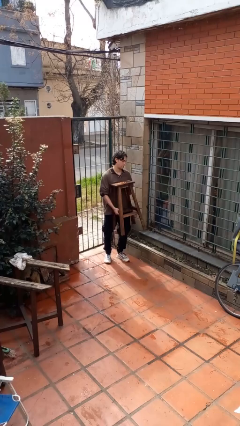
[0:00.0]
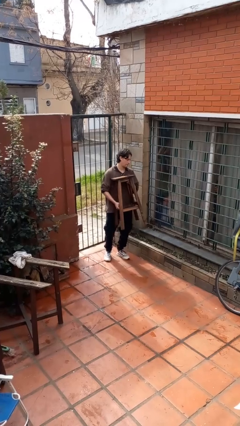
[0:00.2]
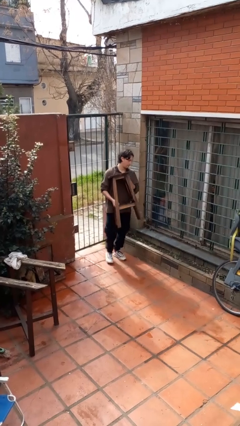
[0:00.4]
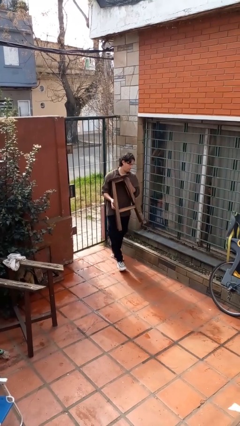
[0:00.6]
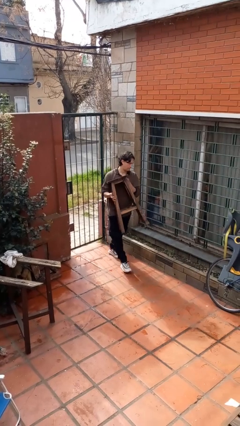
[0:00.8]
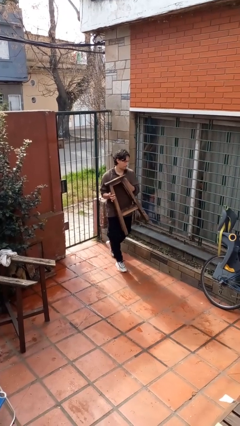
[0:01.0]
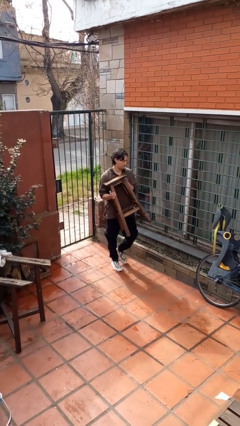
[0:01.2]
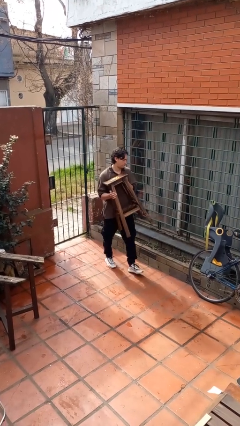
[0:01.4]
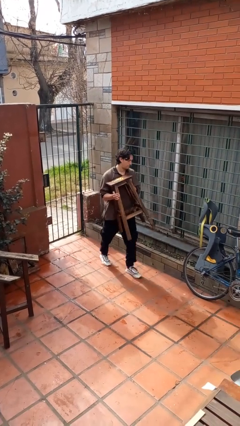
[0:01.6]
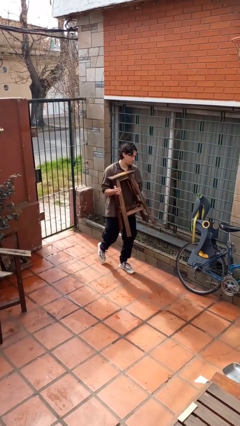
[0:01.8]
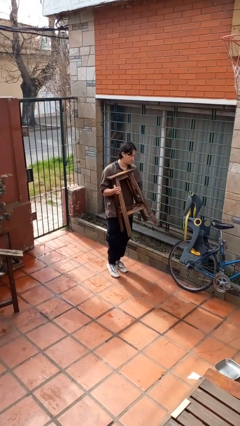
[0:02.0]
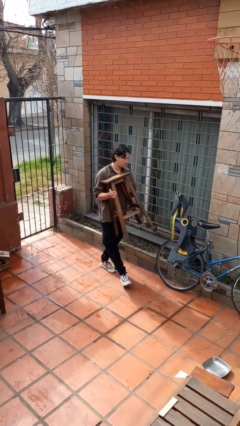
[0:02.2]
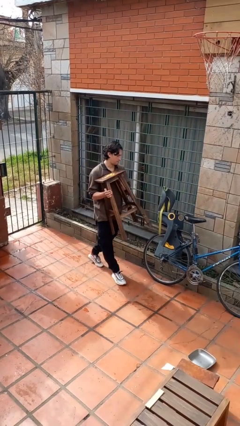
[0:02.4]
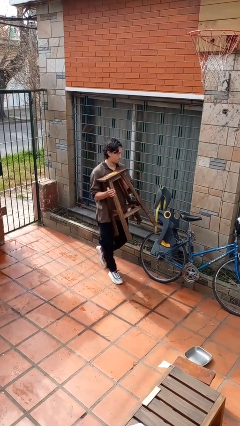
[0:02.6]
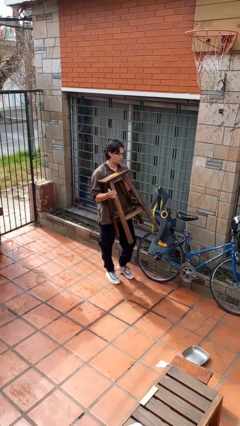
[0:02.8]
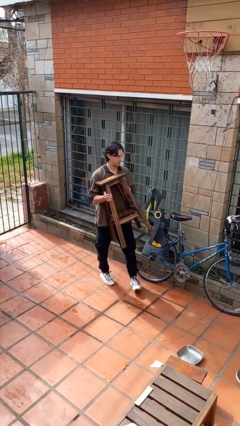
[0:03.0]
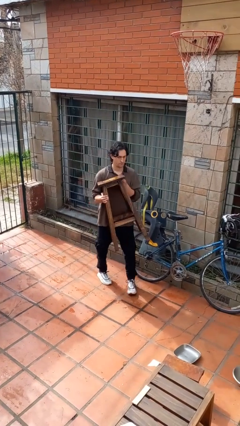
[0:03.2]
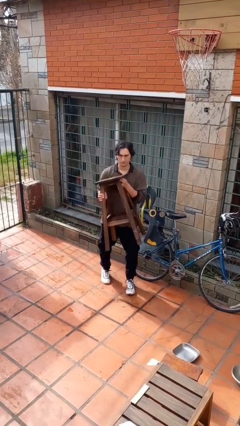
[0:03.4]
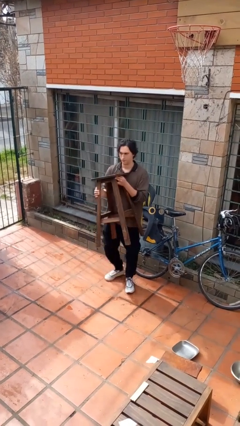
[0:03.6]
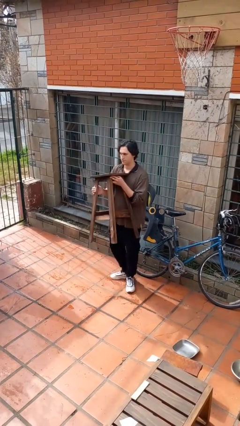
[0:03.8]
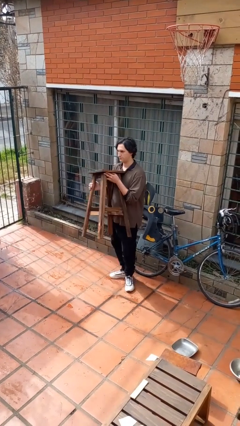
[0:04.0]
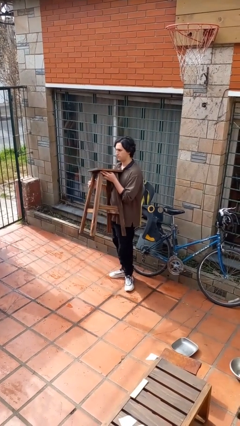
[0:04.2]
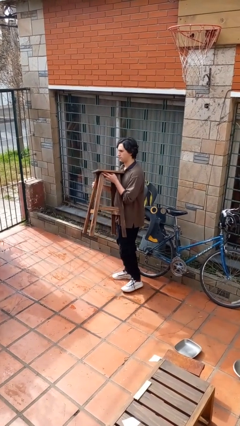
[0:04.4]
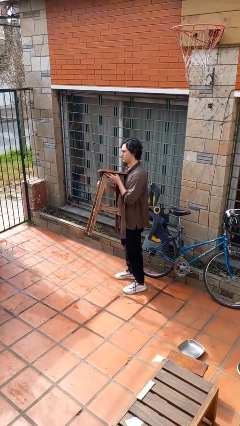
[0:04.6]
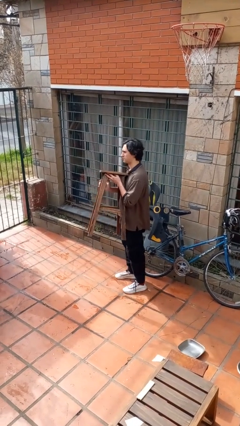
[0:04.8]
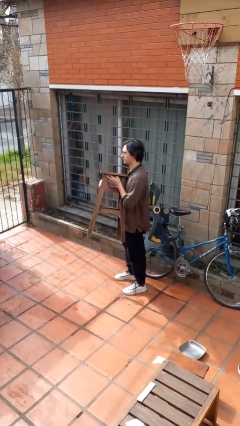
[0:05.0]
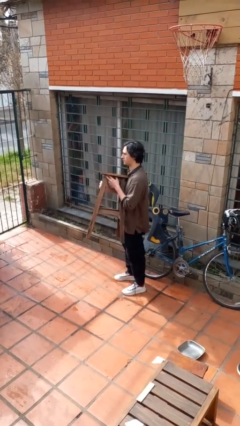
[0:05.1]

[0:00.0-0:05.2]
person carries furniture

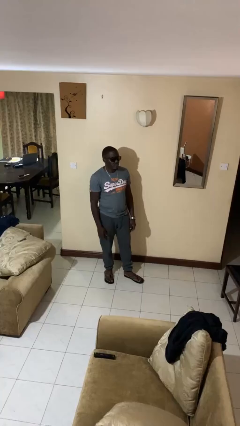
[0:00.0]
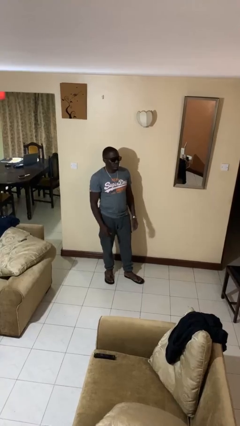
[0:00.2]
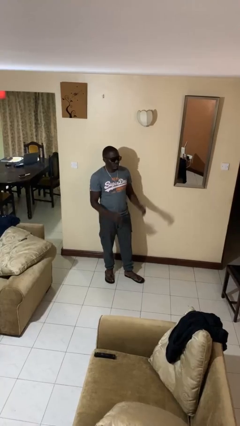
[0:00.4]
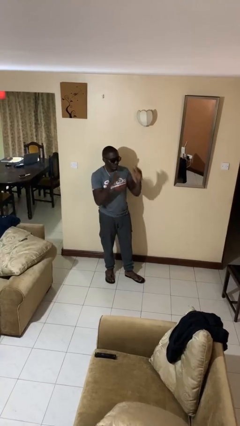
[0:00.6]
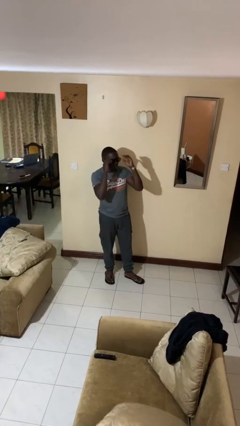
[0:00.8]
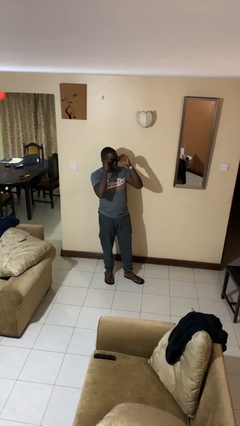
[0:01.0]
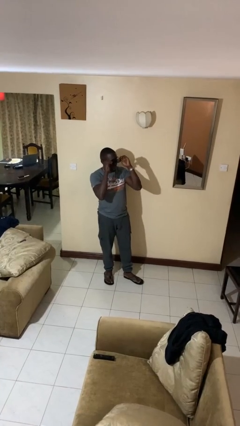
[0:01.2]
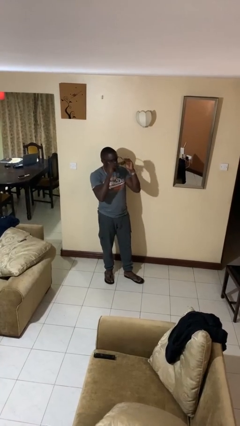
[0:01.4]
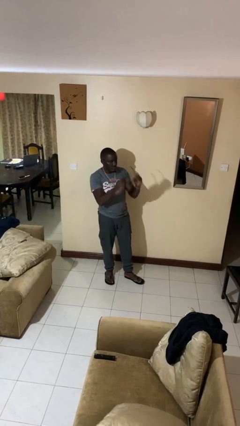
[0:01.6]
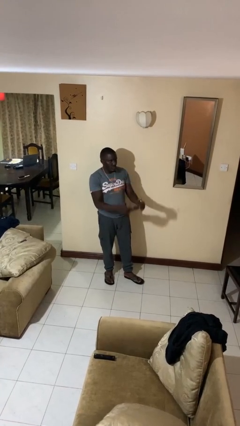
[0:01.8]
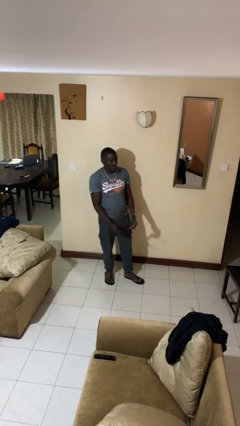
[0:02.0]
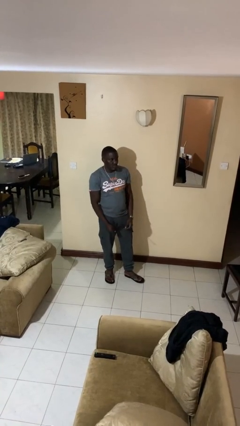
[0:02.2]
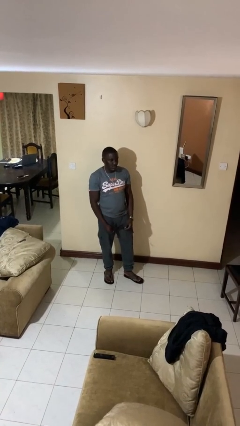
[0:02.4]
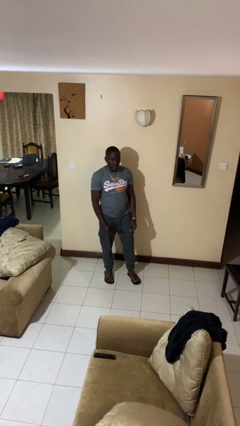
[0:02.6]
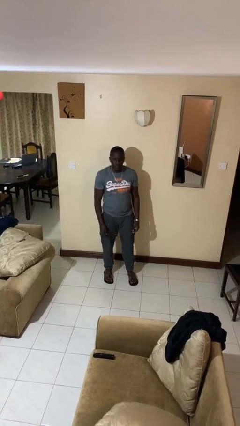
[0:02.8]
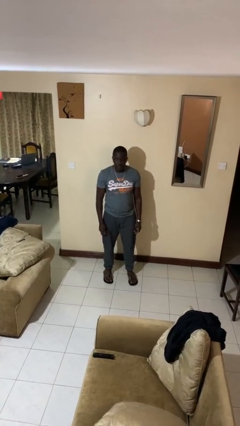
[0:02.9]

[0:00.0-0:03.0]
person takes off sunglasses

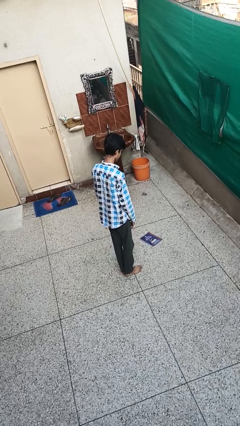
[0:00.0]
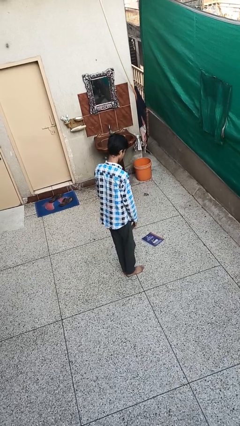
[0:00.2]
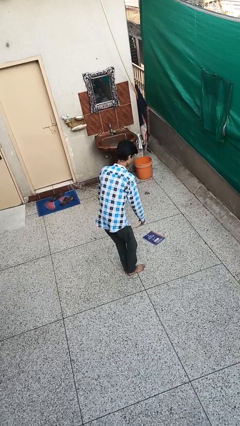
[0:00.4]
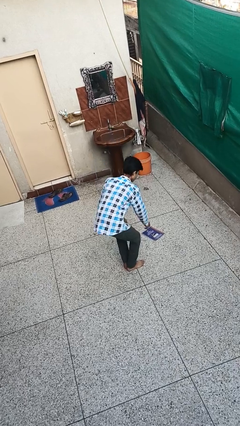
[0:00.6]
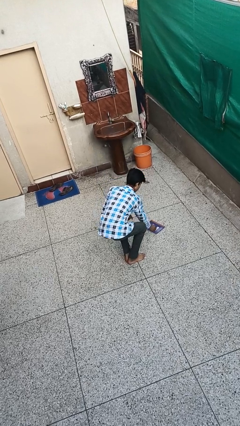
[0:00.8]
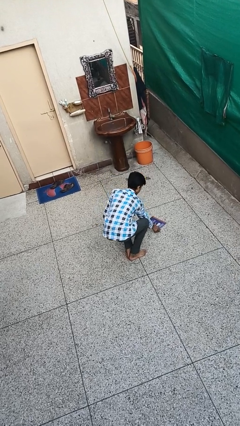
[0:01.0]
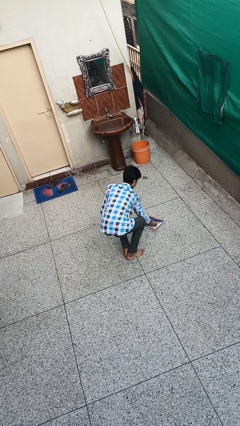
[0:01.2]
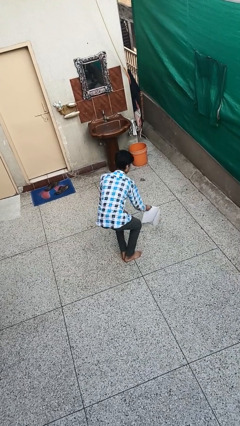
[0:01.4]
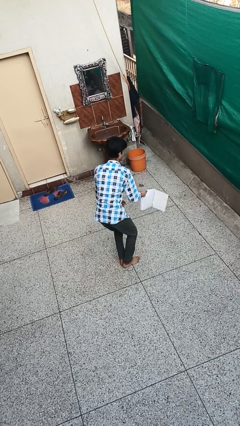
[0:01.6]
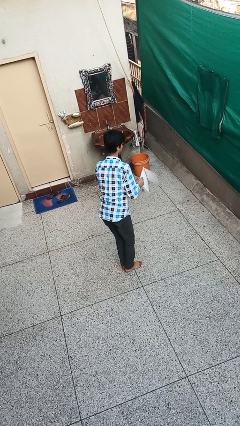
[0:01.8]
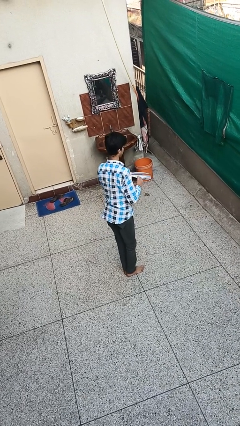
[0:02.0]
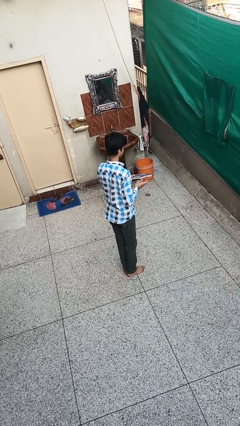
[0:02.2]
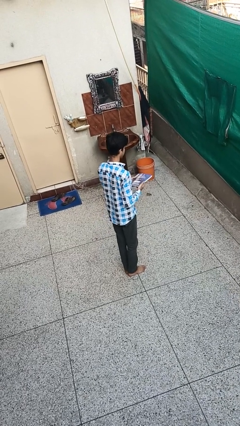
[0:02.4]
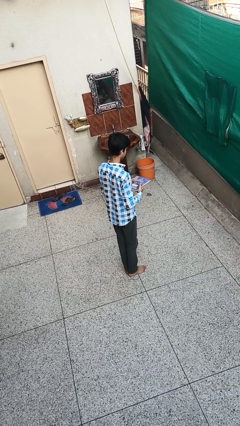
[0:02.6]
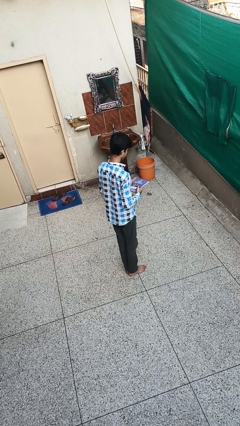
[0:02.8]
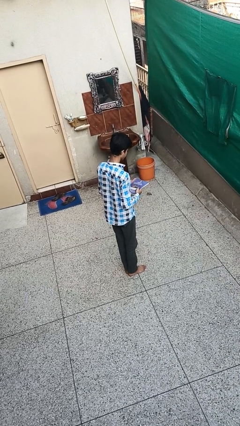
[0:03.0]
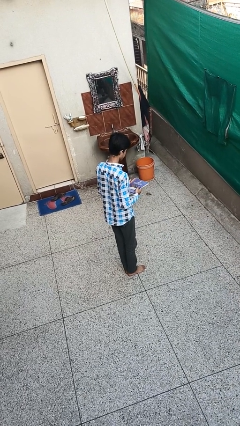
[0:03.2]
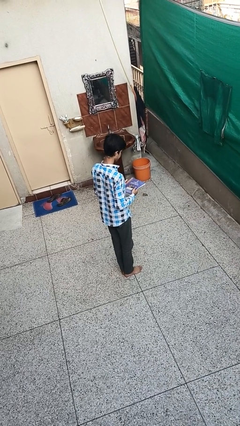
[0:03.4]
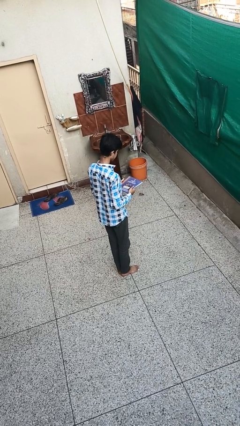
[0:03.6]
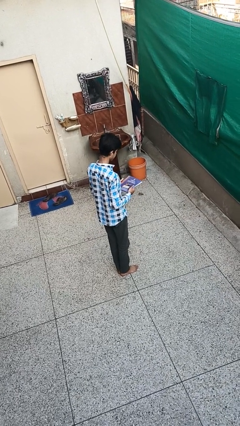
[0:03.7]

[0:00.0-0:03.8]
person picks up object from floor

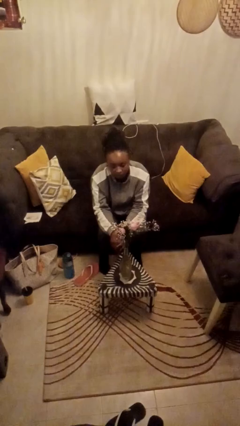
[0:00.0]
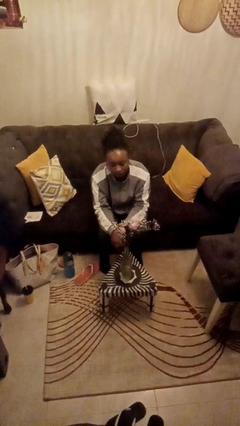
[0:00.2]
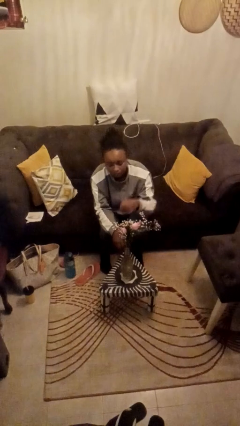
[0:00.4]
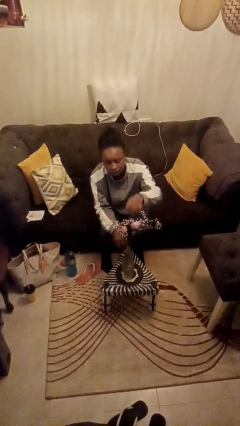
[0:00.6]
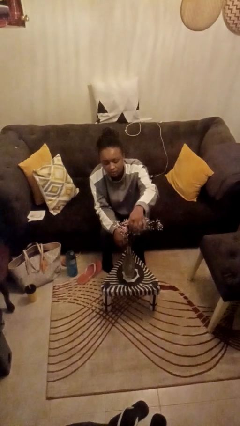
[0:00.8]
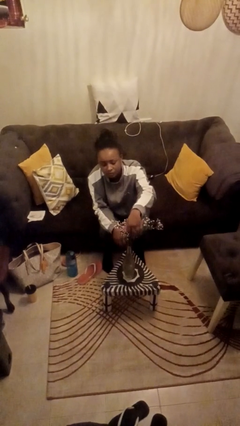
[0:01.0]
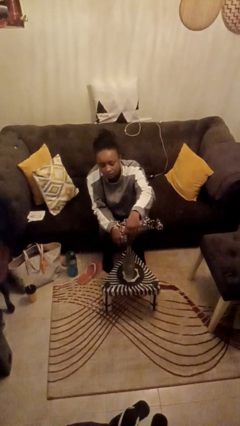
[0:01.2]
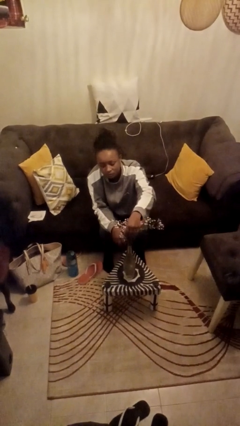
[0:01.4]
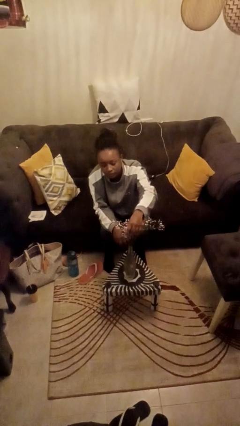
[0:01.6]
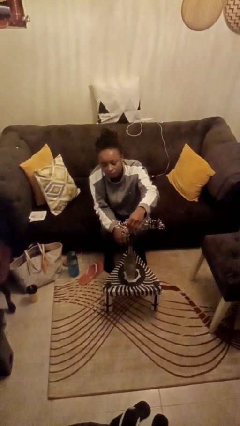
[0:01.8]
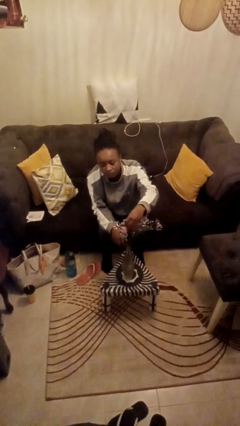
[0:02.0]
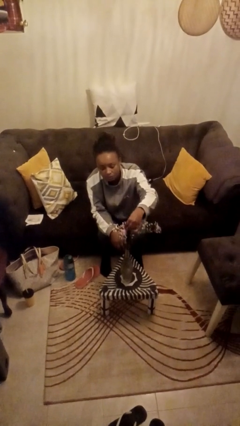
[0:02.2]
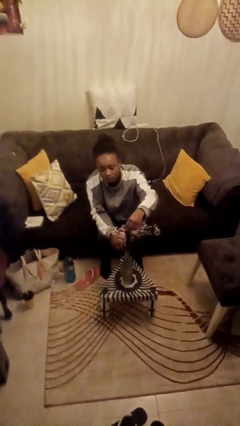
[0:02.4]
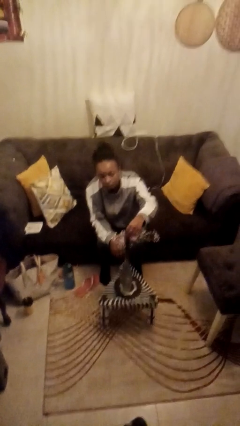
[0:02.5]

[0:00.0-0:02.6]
person arranges flowers in vase

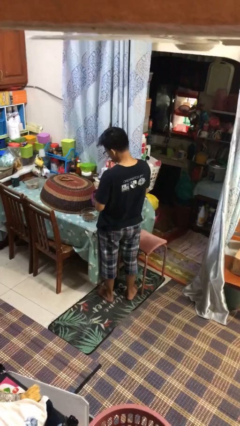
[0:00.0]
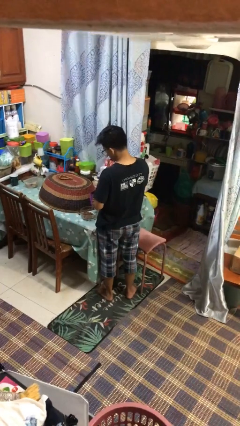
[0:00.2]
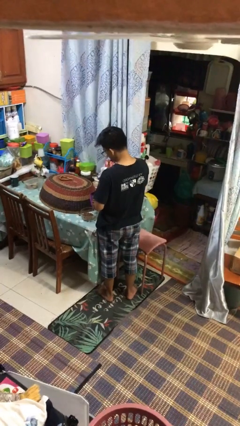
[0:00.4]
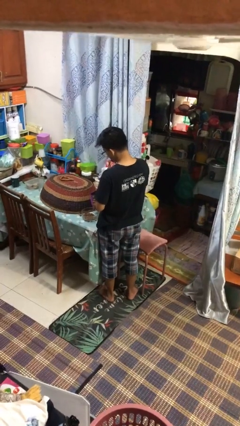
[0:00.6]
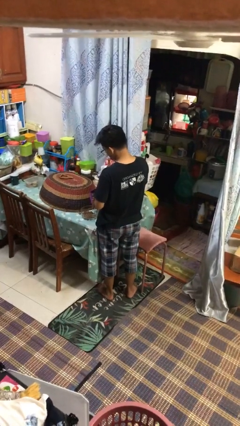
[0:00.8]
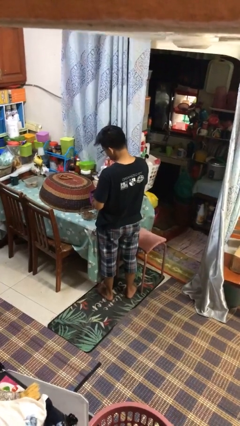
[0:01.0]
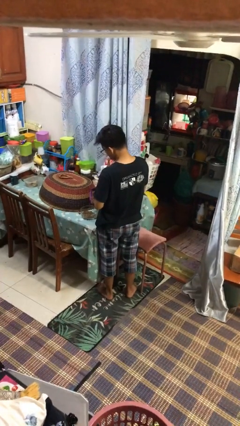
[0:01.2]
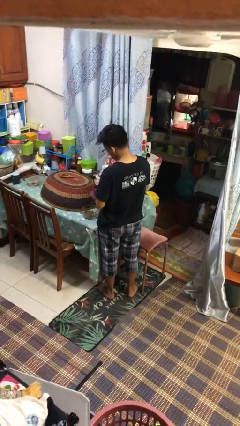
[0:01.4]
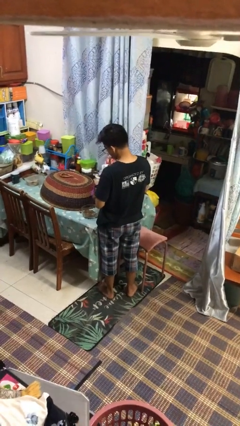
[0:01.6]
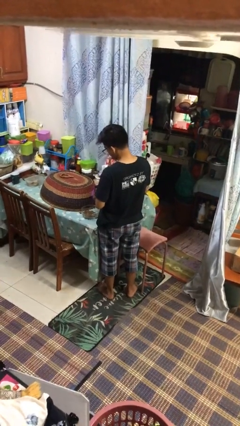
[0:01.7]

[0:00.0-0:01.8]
person pours into bowl

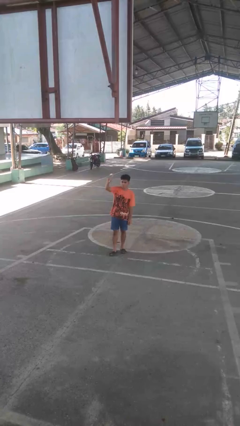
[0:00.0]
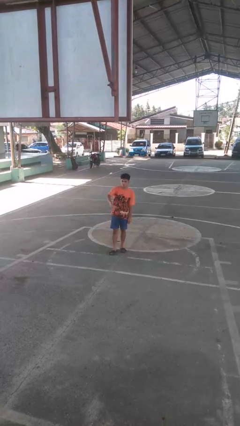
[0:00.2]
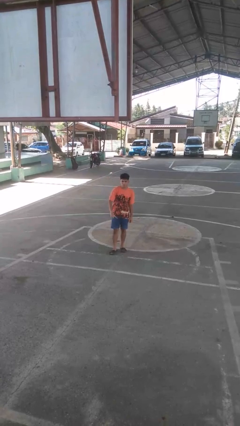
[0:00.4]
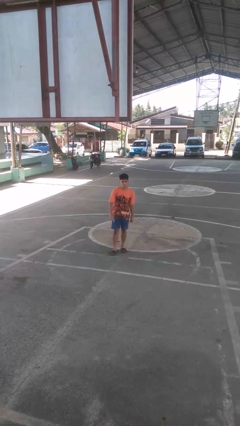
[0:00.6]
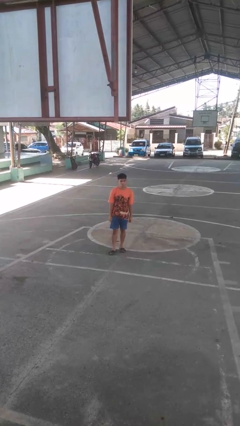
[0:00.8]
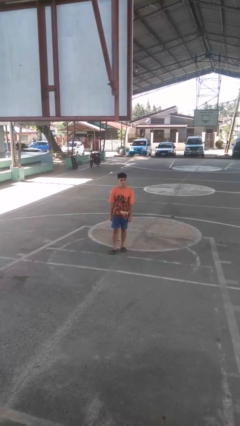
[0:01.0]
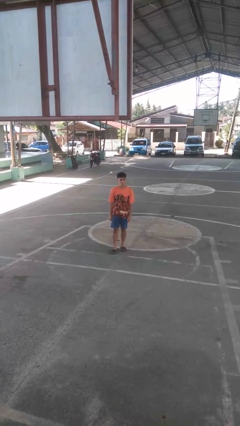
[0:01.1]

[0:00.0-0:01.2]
person gestures swipe down
